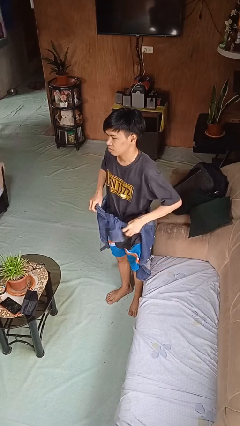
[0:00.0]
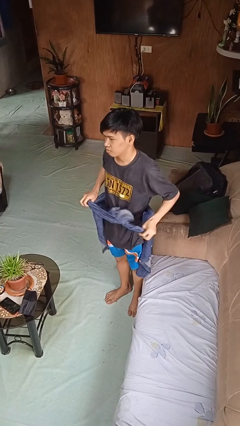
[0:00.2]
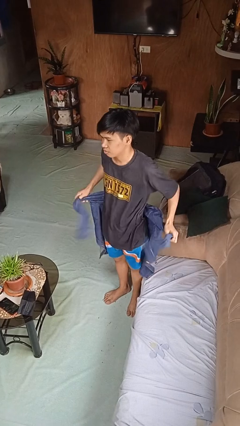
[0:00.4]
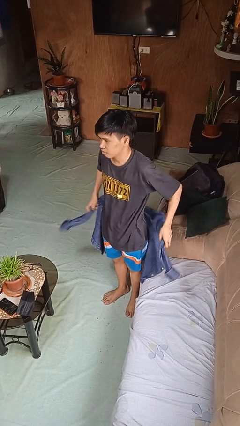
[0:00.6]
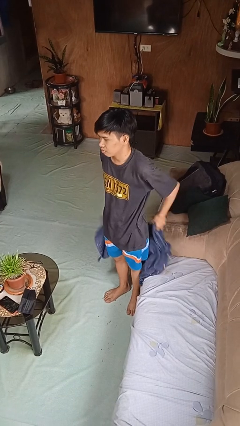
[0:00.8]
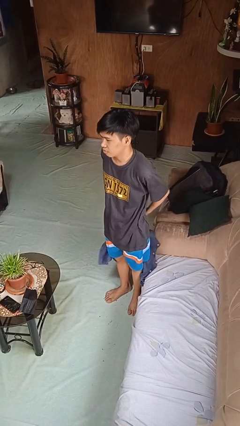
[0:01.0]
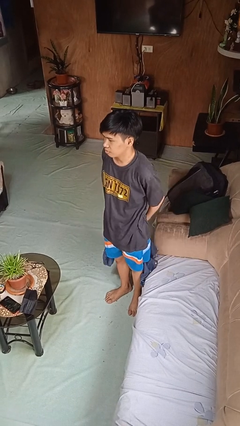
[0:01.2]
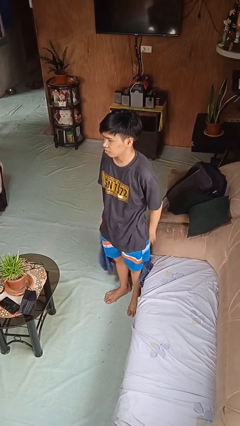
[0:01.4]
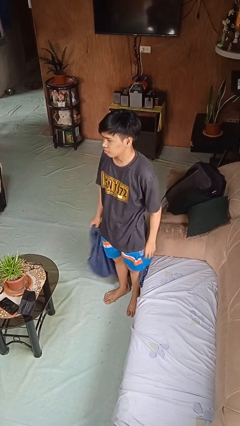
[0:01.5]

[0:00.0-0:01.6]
person unties jacket around waist

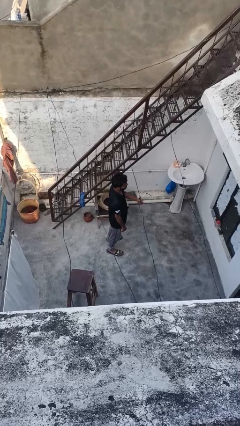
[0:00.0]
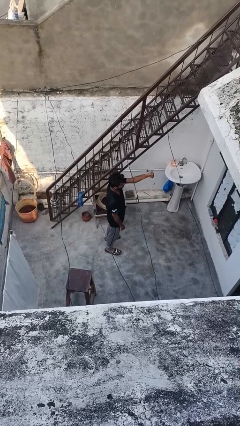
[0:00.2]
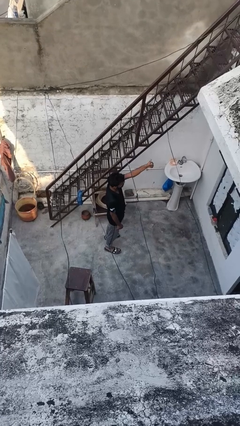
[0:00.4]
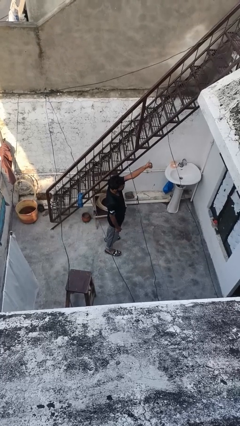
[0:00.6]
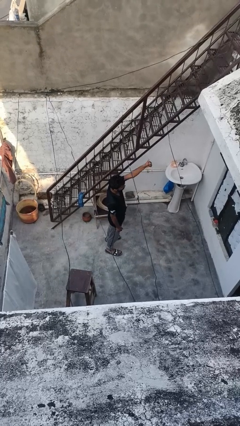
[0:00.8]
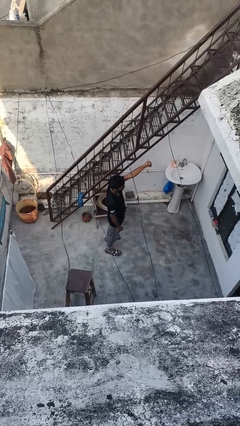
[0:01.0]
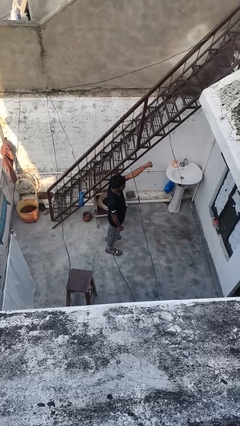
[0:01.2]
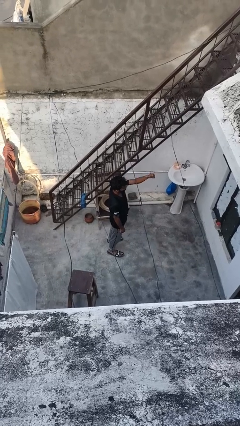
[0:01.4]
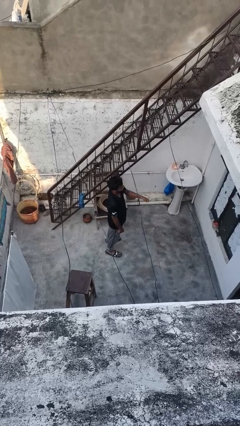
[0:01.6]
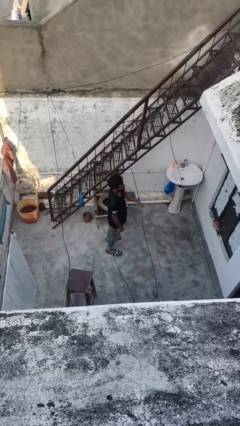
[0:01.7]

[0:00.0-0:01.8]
person gestures thumbs up

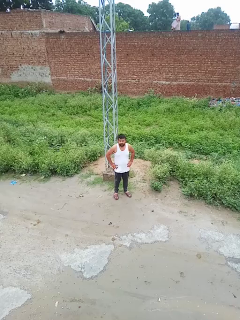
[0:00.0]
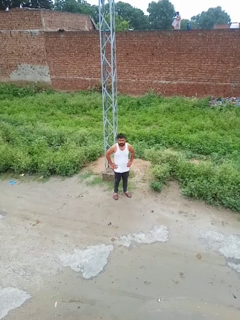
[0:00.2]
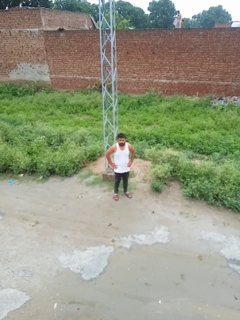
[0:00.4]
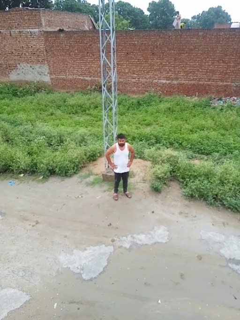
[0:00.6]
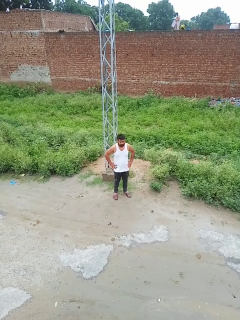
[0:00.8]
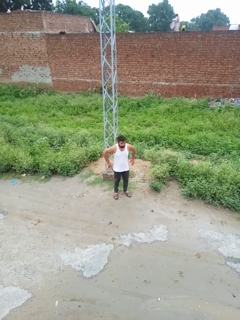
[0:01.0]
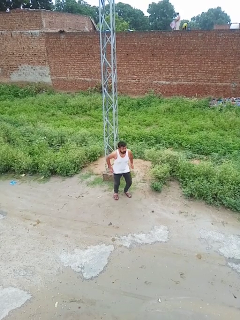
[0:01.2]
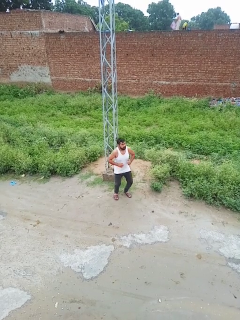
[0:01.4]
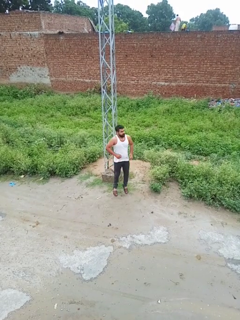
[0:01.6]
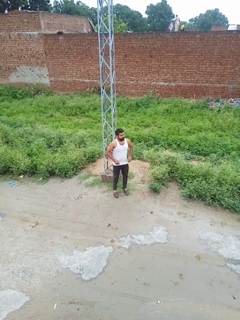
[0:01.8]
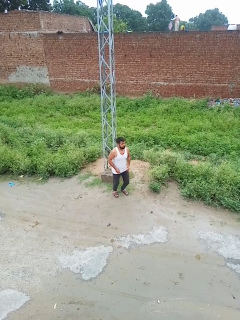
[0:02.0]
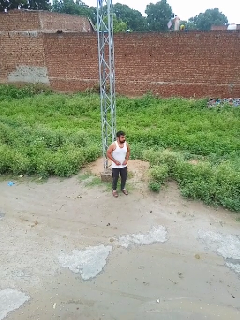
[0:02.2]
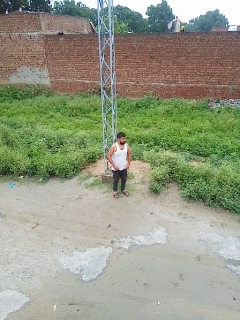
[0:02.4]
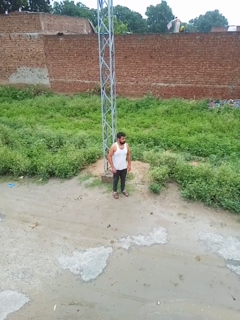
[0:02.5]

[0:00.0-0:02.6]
person jumps

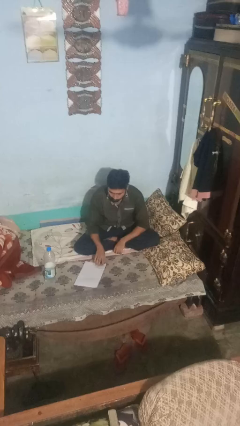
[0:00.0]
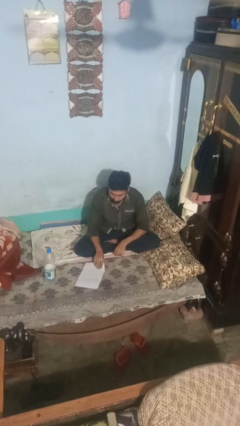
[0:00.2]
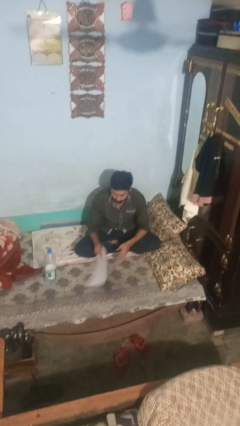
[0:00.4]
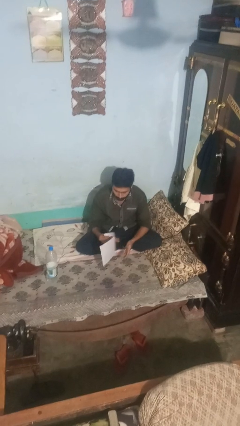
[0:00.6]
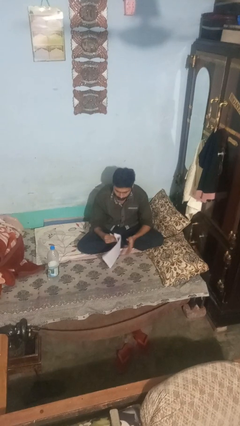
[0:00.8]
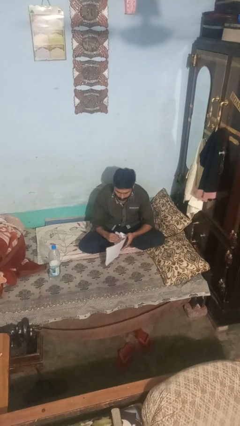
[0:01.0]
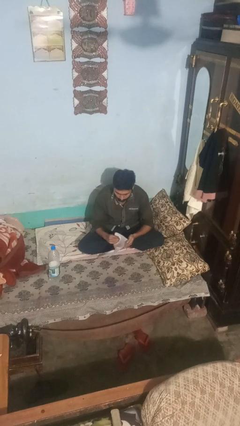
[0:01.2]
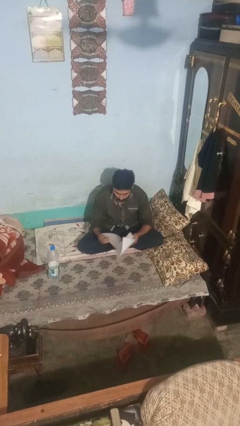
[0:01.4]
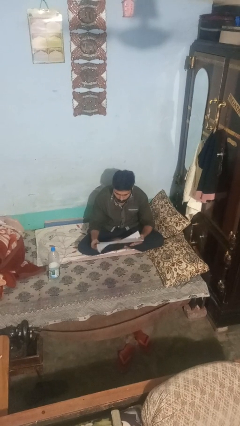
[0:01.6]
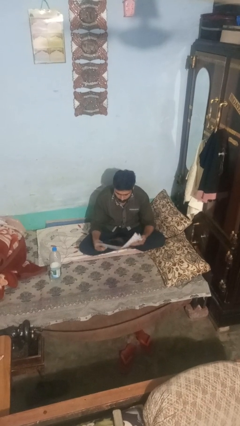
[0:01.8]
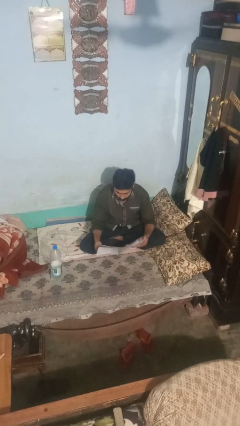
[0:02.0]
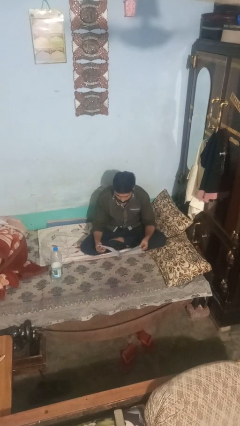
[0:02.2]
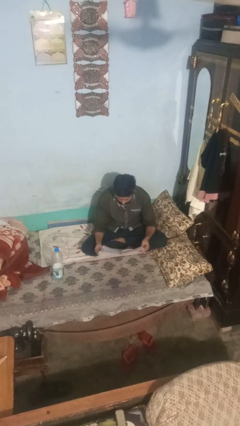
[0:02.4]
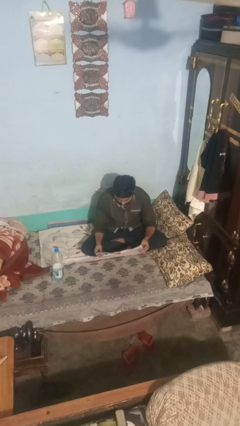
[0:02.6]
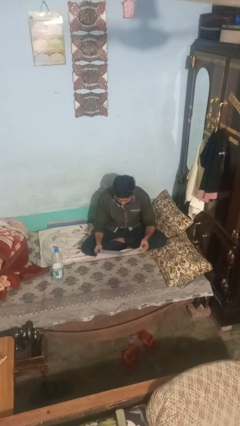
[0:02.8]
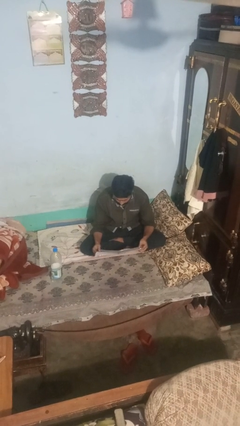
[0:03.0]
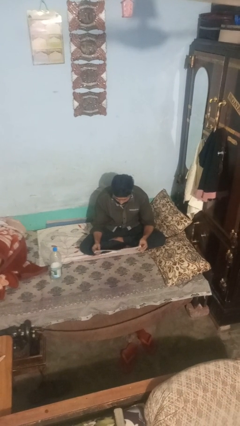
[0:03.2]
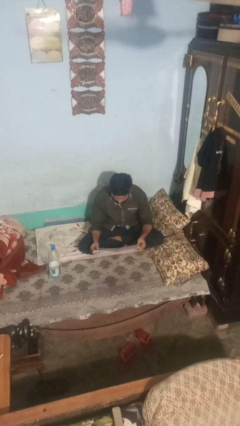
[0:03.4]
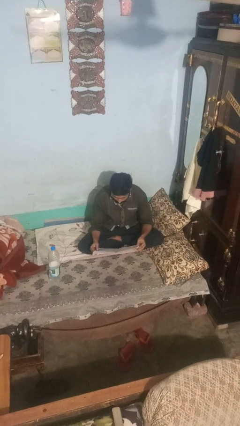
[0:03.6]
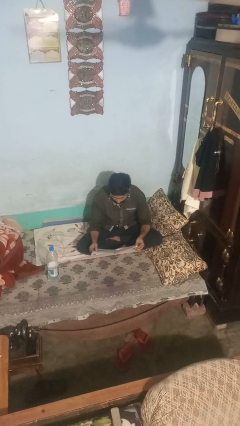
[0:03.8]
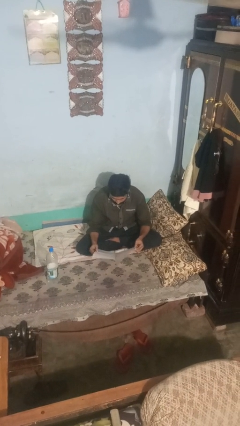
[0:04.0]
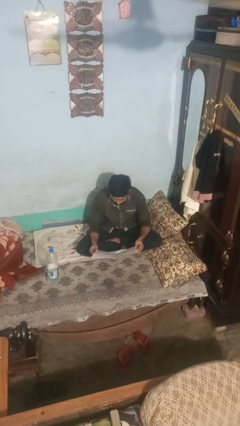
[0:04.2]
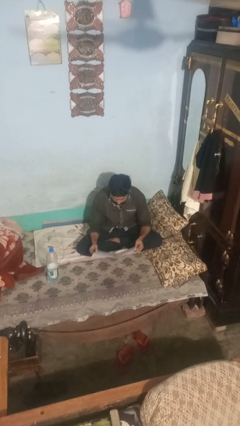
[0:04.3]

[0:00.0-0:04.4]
person reads newspaper

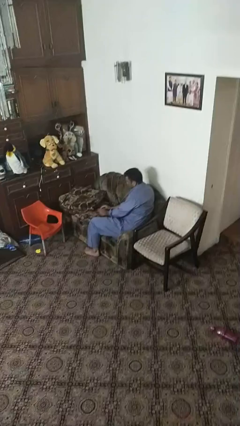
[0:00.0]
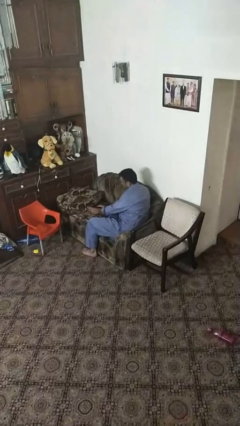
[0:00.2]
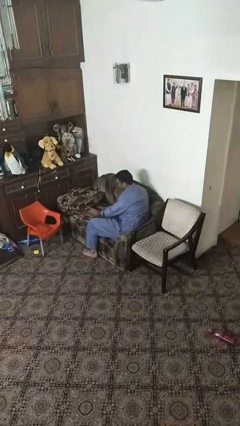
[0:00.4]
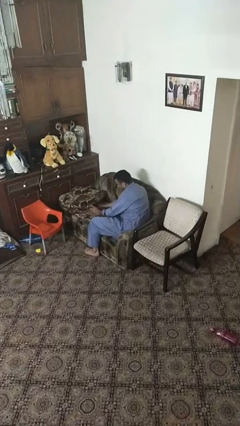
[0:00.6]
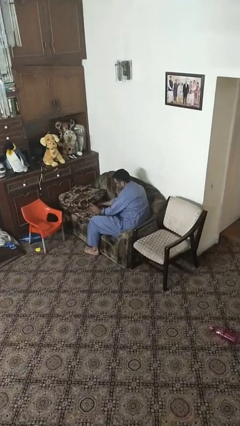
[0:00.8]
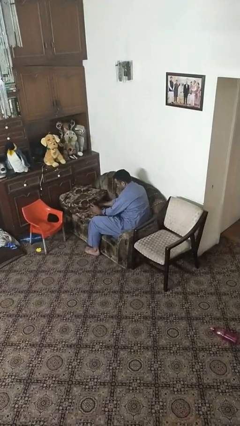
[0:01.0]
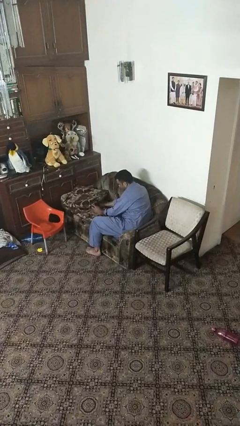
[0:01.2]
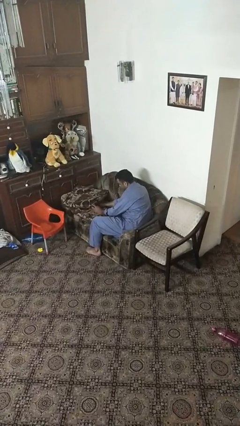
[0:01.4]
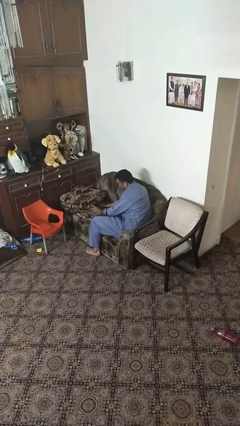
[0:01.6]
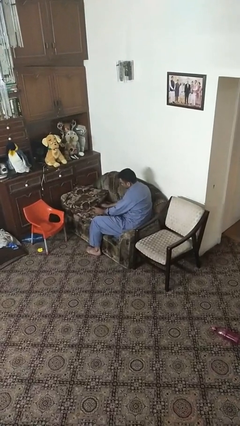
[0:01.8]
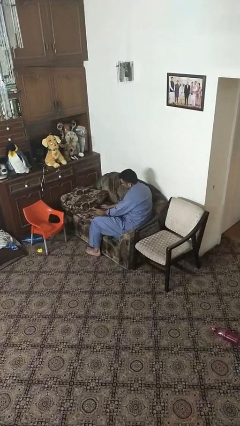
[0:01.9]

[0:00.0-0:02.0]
person searches in couch

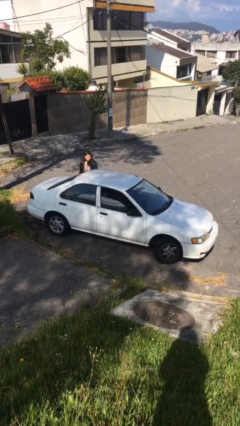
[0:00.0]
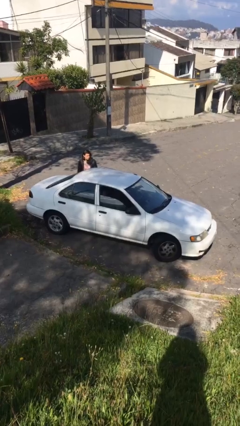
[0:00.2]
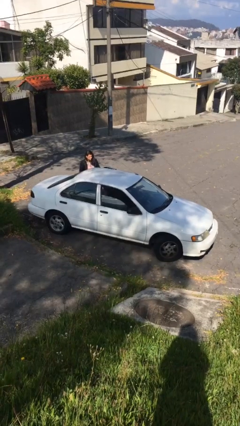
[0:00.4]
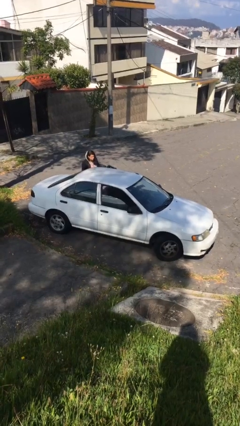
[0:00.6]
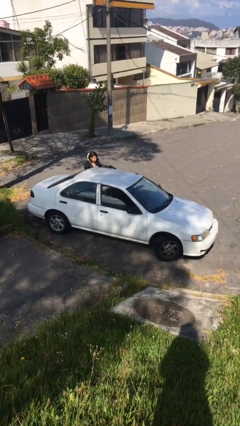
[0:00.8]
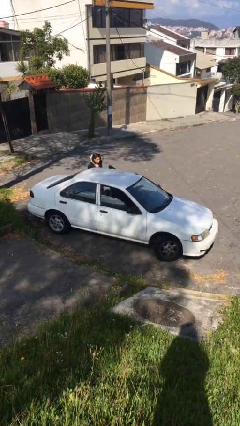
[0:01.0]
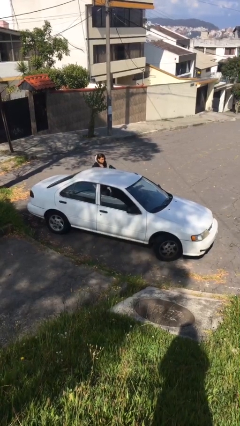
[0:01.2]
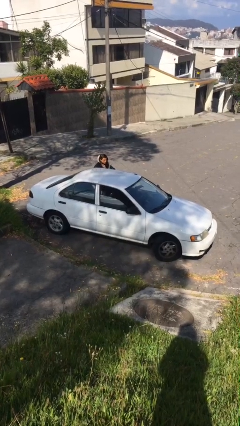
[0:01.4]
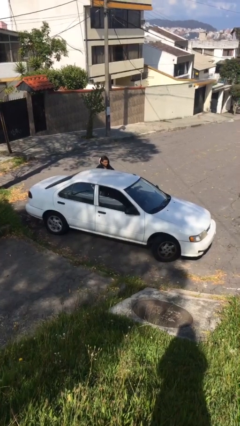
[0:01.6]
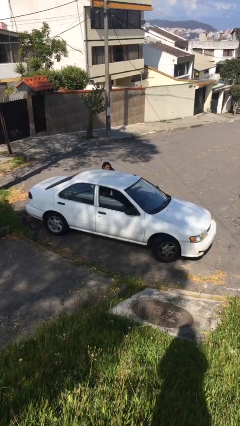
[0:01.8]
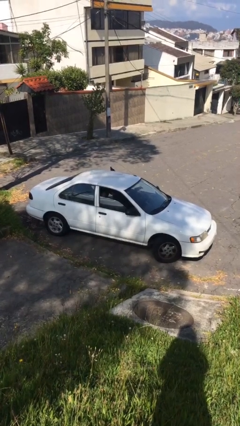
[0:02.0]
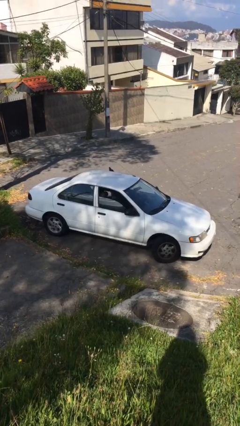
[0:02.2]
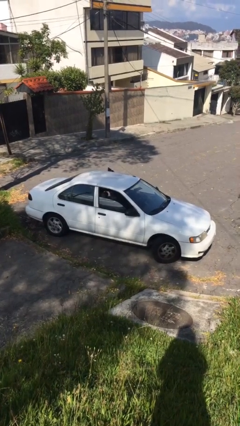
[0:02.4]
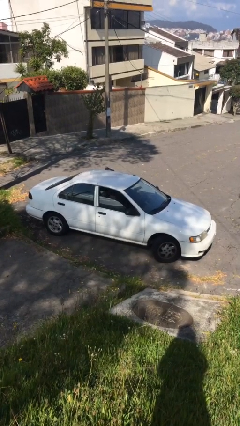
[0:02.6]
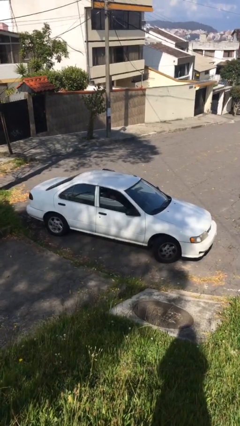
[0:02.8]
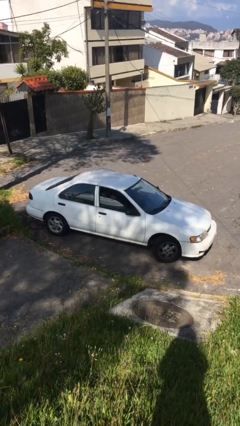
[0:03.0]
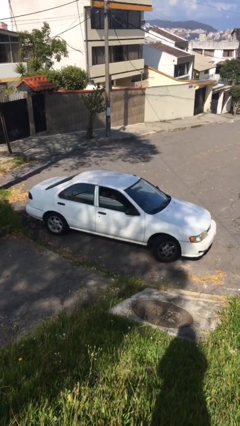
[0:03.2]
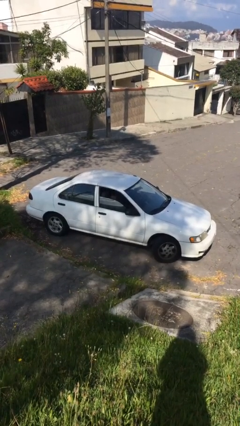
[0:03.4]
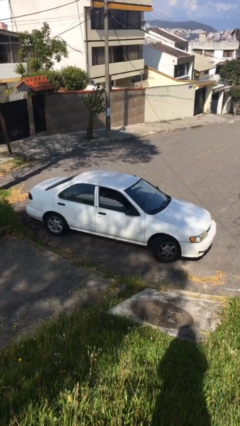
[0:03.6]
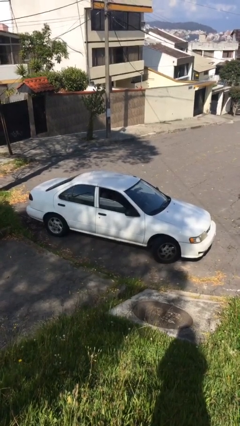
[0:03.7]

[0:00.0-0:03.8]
car picks up person

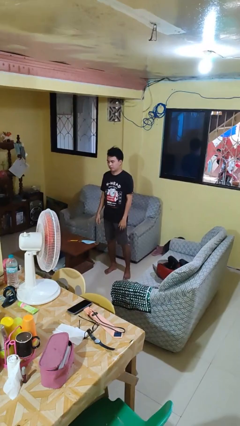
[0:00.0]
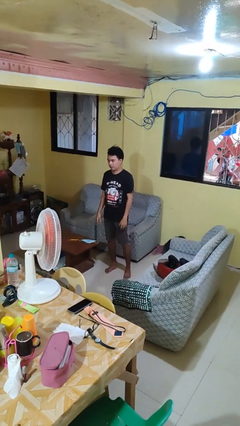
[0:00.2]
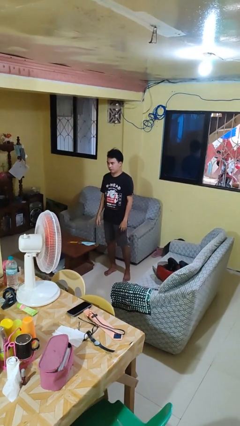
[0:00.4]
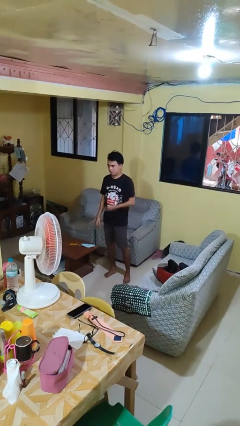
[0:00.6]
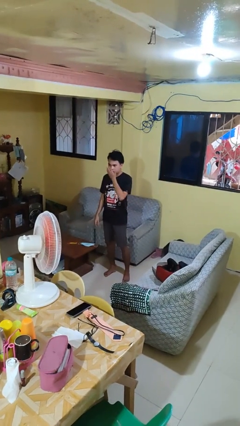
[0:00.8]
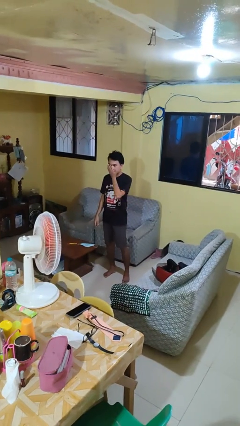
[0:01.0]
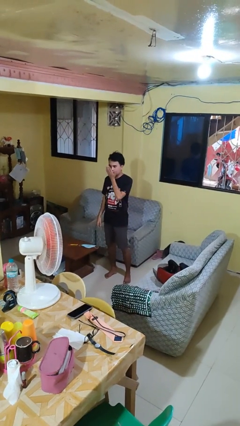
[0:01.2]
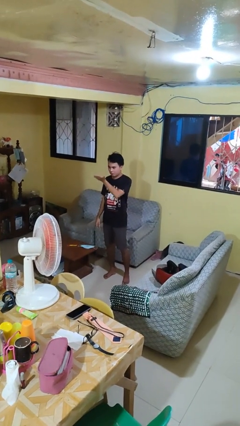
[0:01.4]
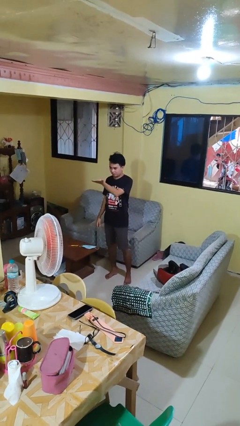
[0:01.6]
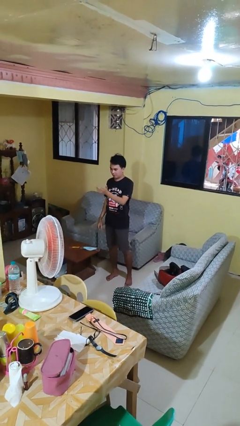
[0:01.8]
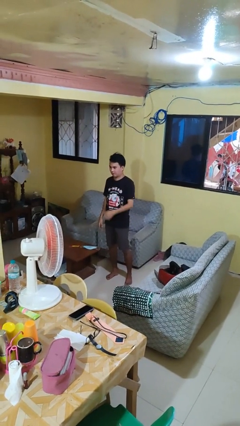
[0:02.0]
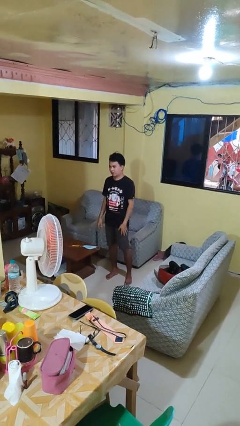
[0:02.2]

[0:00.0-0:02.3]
person gestures blow kiss
